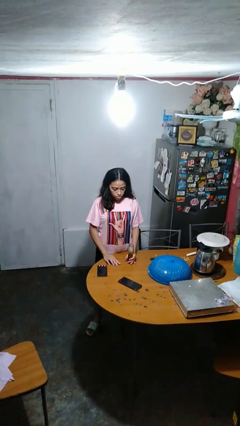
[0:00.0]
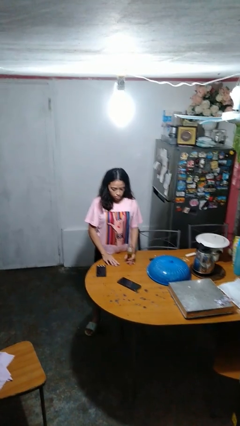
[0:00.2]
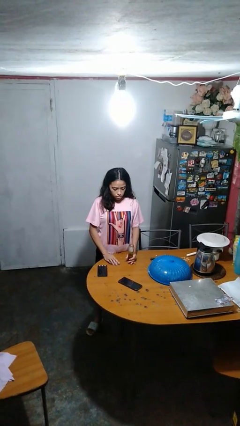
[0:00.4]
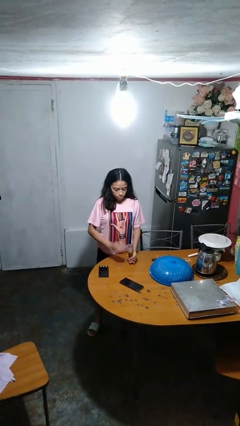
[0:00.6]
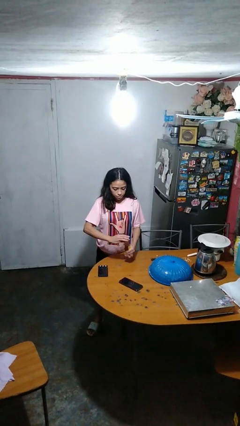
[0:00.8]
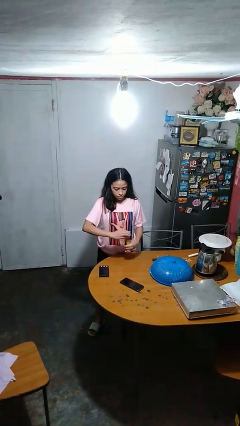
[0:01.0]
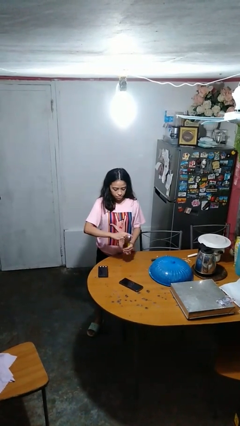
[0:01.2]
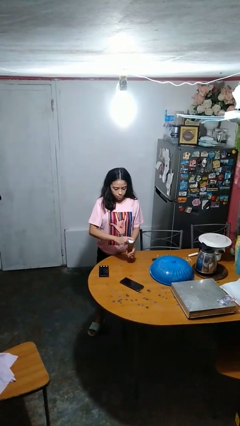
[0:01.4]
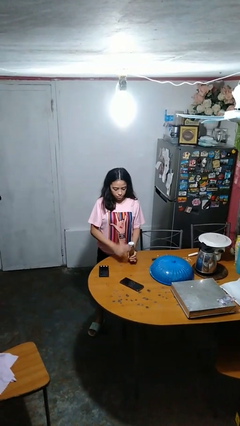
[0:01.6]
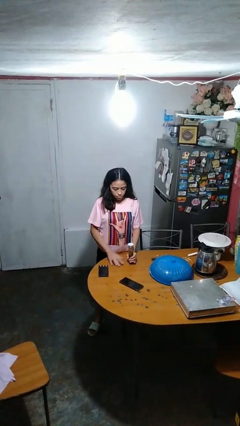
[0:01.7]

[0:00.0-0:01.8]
person closes jar

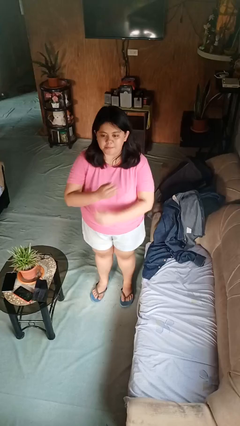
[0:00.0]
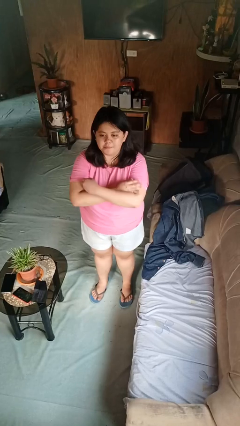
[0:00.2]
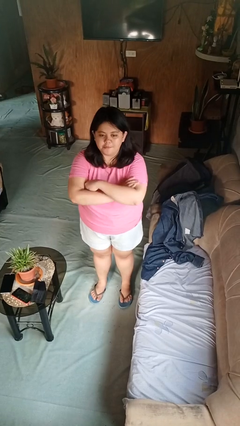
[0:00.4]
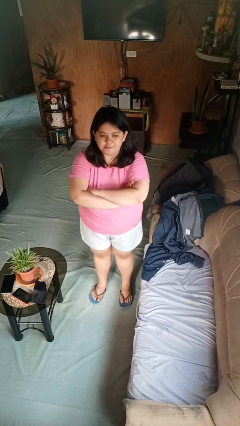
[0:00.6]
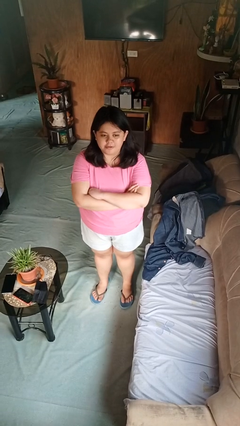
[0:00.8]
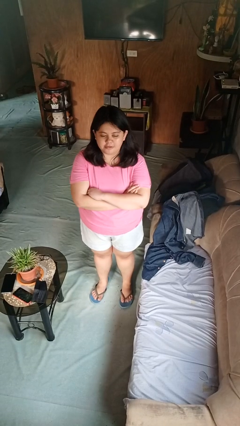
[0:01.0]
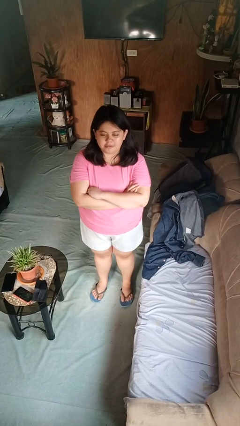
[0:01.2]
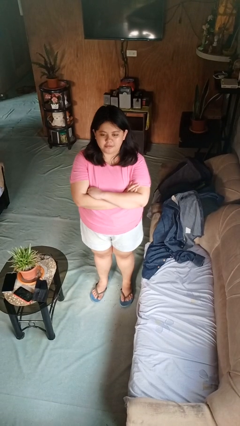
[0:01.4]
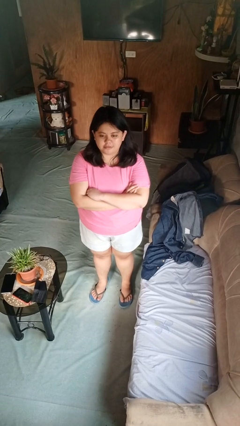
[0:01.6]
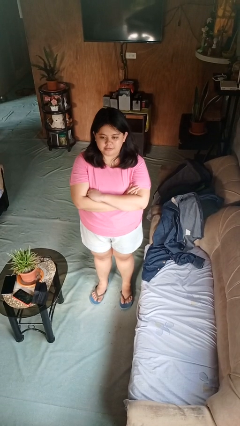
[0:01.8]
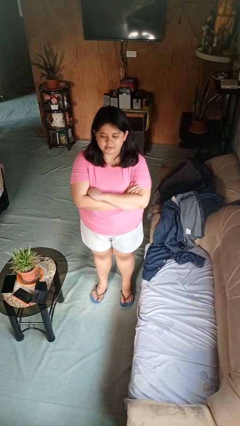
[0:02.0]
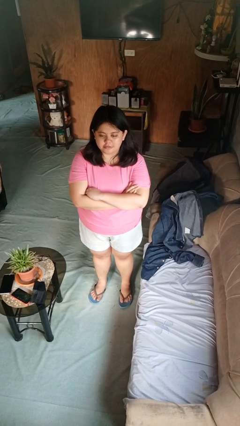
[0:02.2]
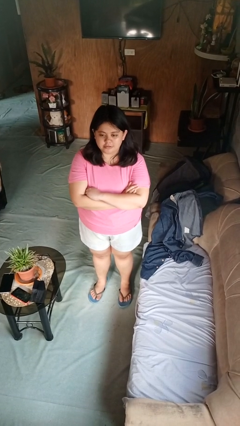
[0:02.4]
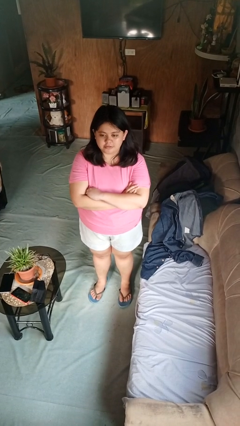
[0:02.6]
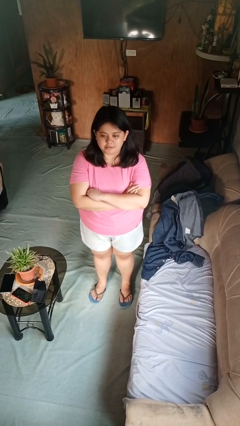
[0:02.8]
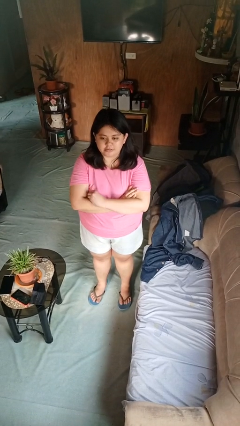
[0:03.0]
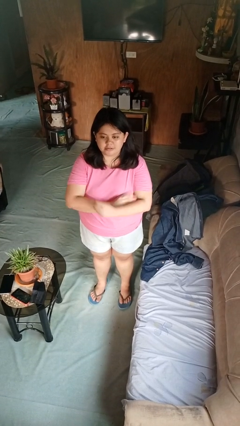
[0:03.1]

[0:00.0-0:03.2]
person crosses arms

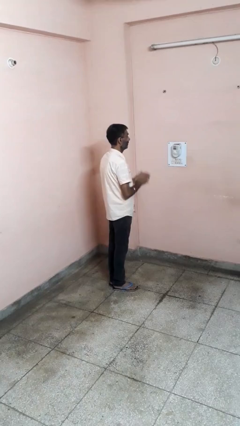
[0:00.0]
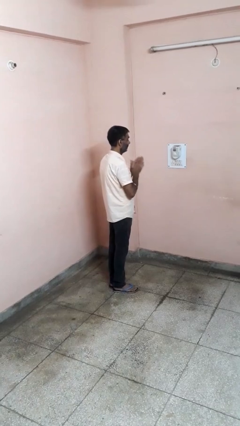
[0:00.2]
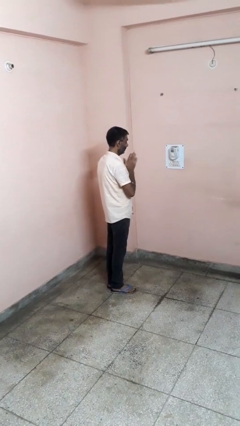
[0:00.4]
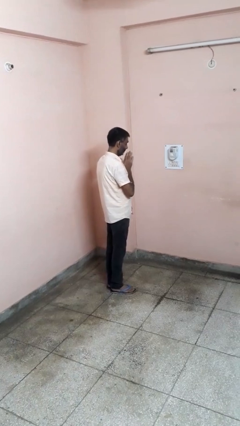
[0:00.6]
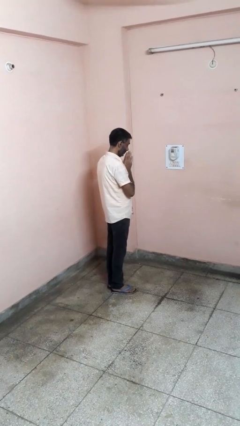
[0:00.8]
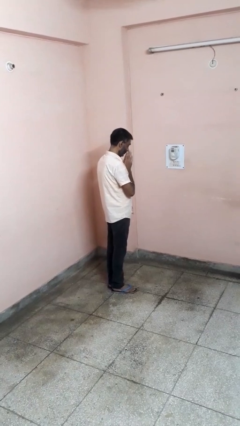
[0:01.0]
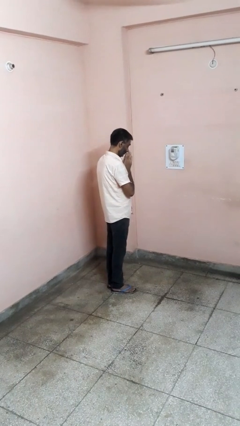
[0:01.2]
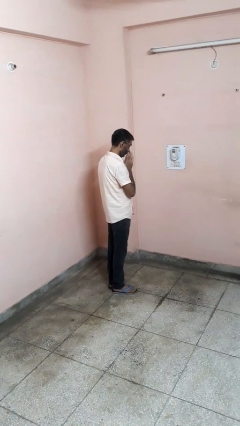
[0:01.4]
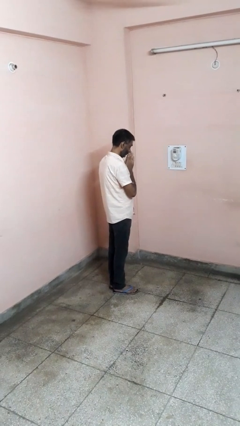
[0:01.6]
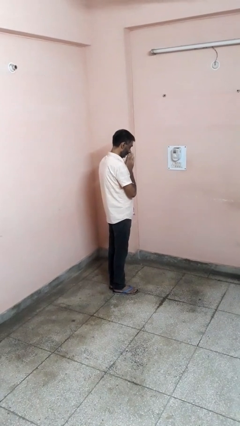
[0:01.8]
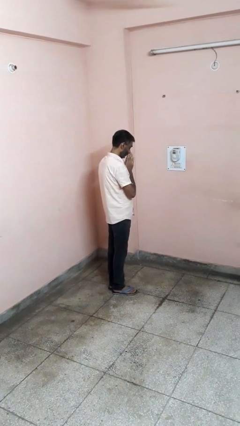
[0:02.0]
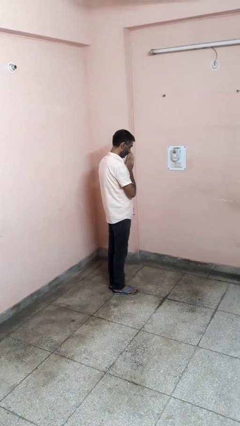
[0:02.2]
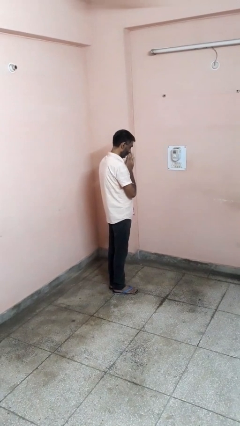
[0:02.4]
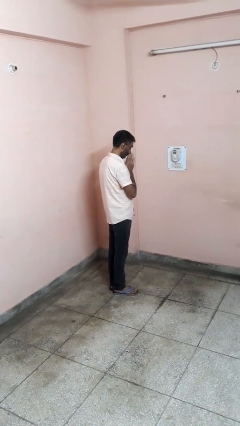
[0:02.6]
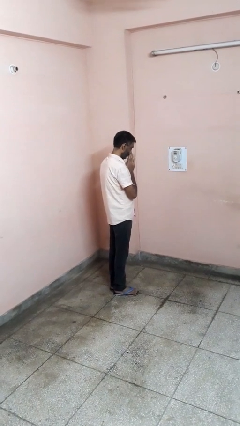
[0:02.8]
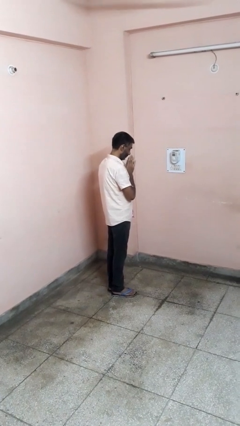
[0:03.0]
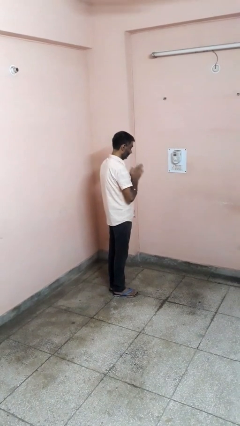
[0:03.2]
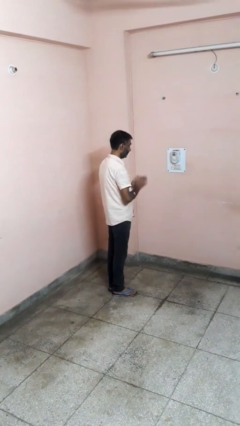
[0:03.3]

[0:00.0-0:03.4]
person prays

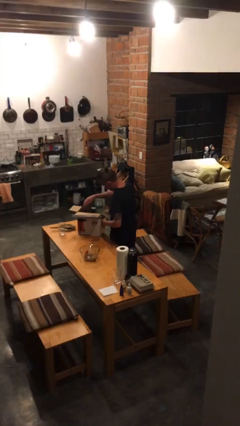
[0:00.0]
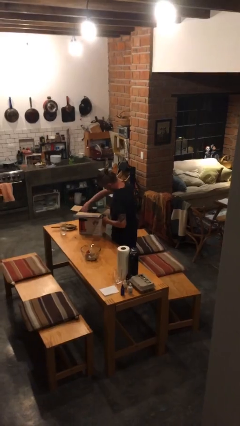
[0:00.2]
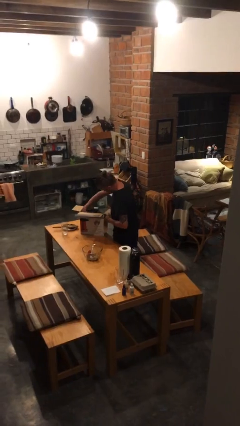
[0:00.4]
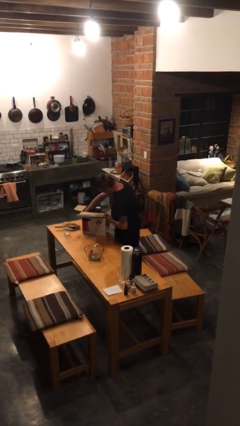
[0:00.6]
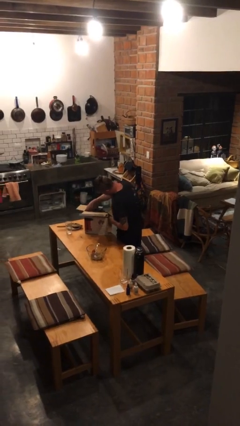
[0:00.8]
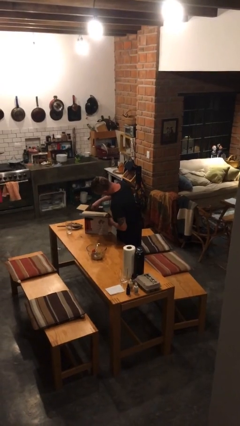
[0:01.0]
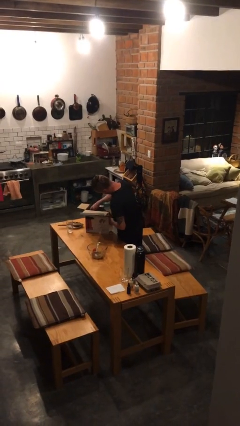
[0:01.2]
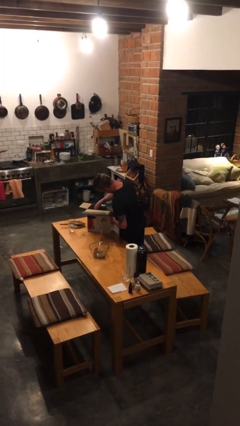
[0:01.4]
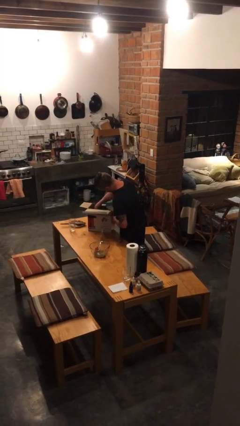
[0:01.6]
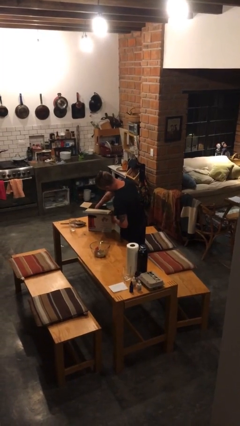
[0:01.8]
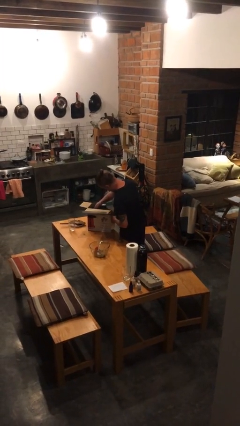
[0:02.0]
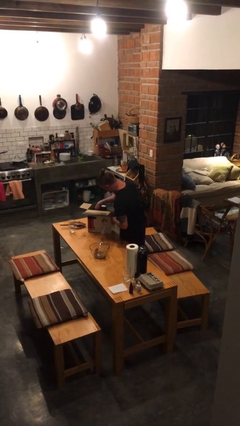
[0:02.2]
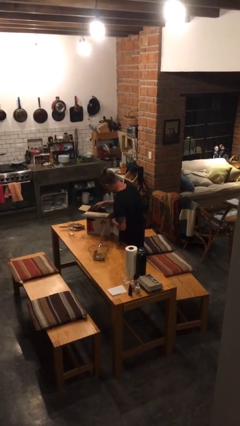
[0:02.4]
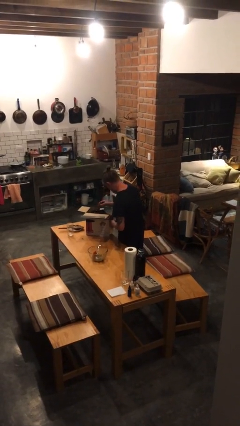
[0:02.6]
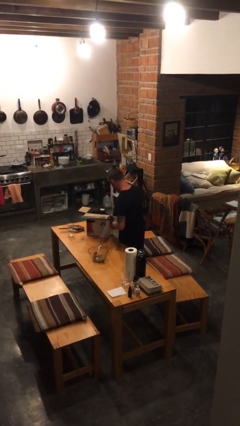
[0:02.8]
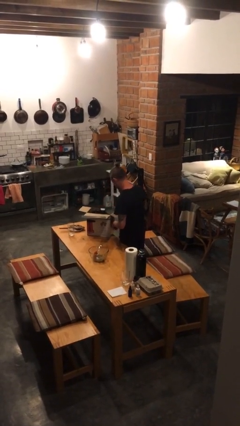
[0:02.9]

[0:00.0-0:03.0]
person searches in box

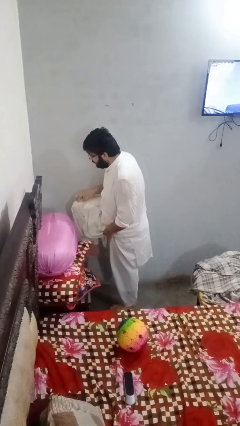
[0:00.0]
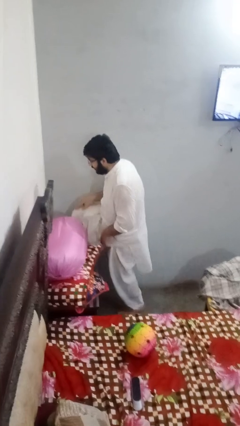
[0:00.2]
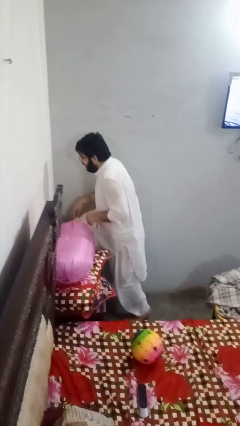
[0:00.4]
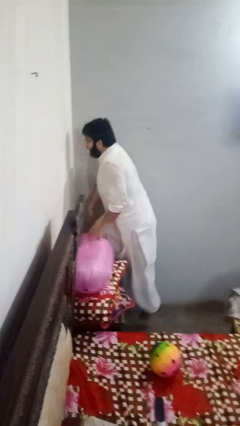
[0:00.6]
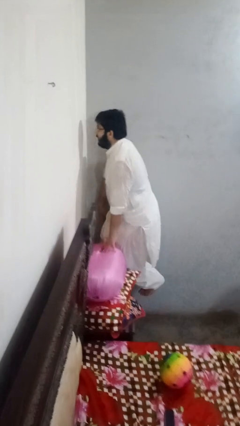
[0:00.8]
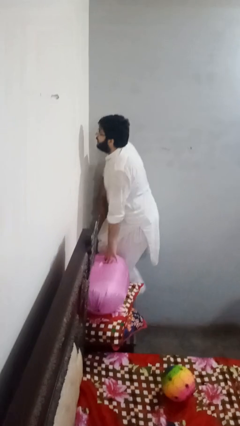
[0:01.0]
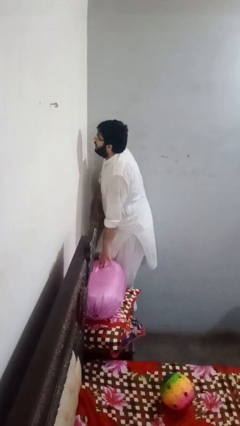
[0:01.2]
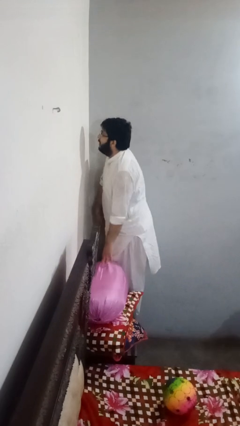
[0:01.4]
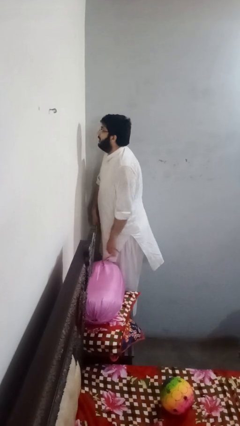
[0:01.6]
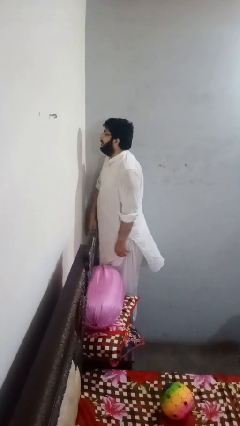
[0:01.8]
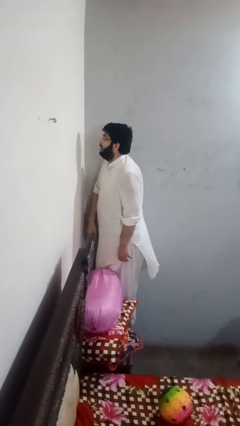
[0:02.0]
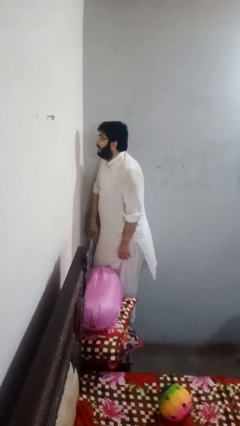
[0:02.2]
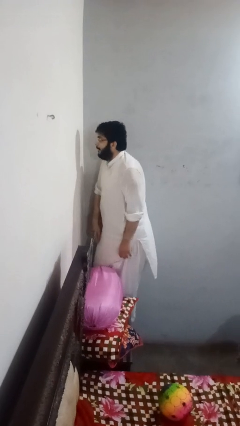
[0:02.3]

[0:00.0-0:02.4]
person climbs on table

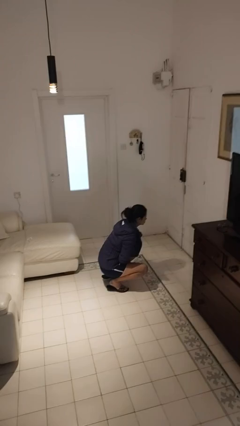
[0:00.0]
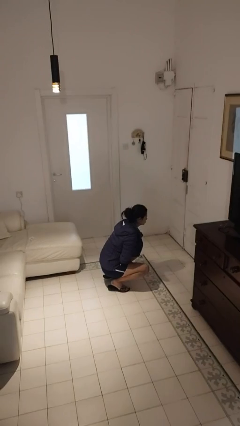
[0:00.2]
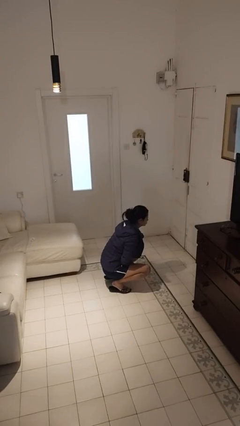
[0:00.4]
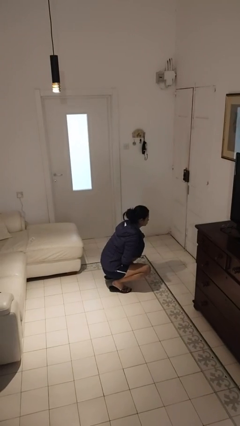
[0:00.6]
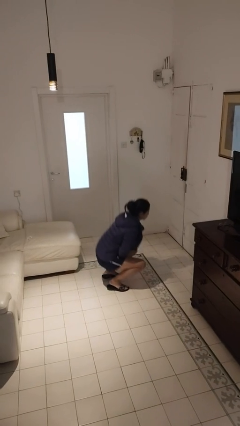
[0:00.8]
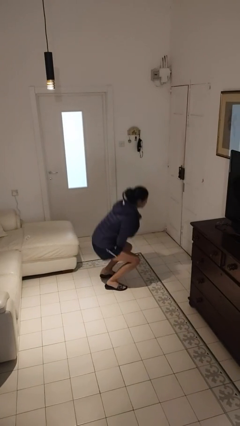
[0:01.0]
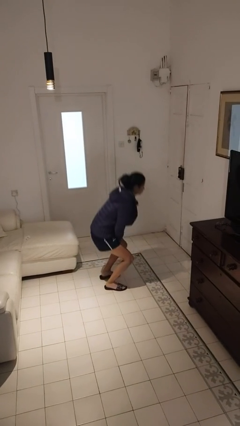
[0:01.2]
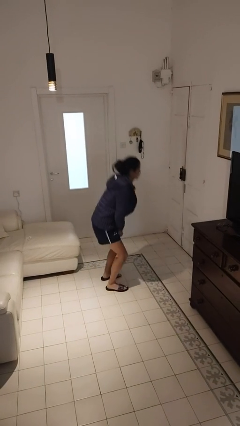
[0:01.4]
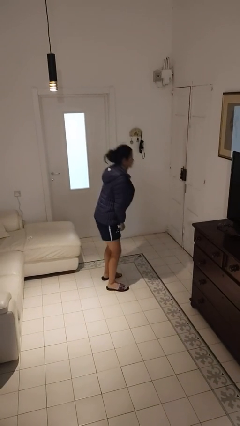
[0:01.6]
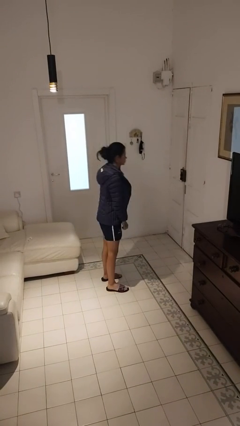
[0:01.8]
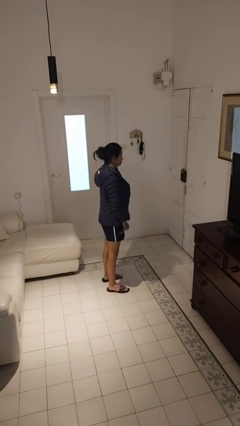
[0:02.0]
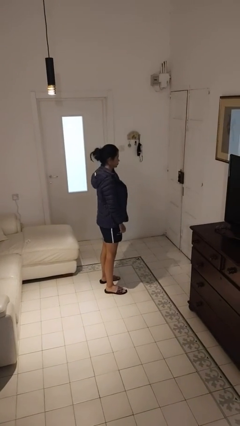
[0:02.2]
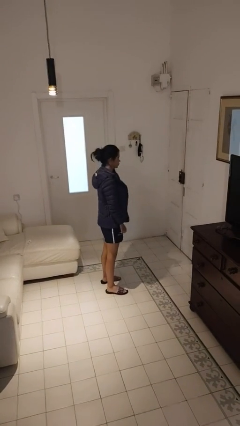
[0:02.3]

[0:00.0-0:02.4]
person stands up

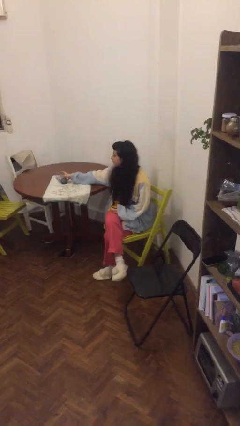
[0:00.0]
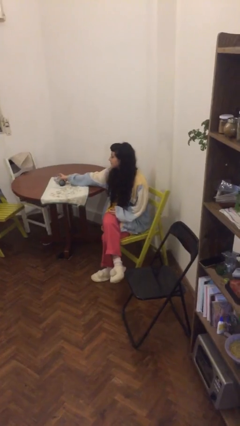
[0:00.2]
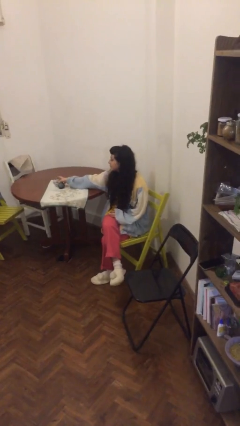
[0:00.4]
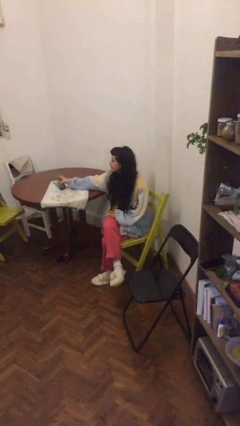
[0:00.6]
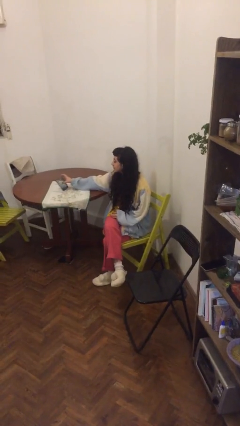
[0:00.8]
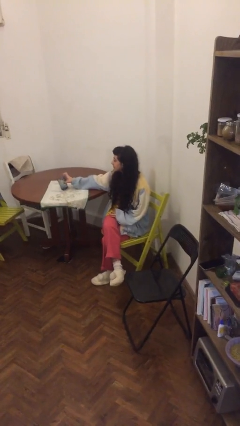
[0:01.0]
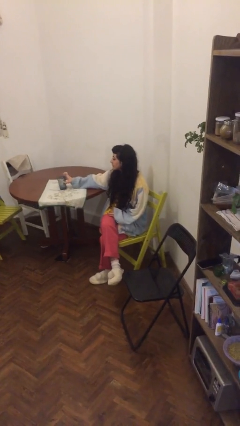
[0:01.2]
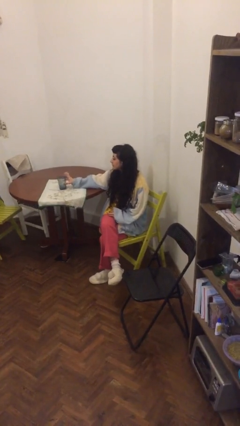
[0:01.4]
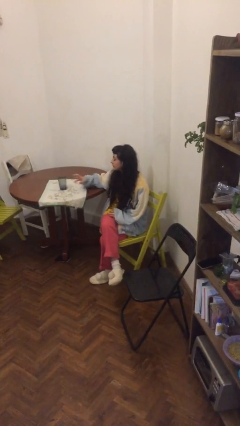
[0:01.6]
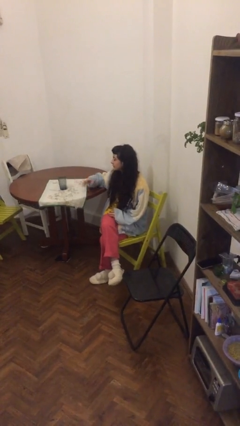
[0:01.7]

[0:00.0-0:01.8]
person sets upright glass
